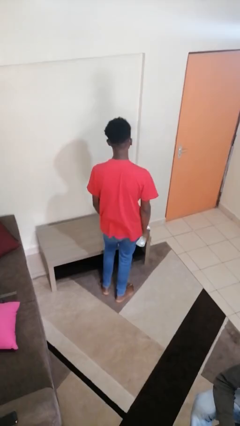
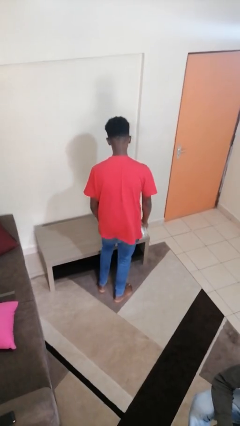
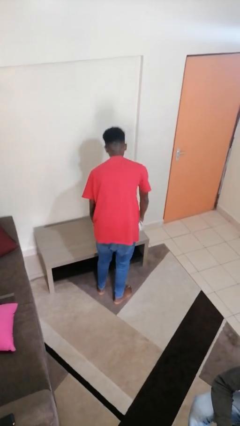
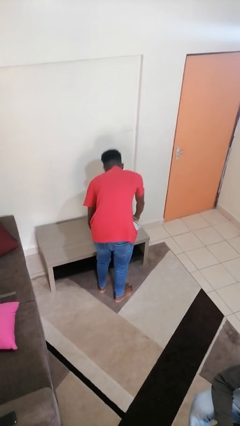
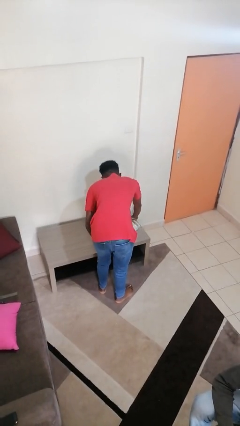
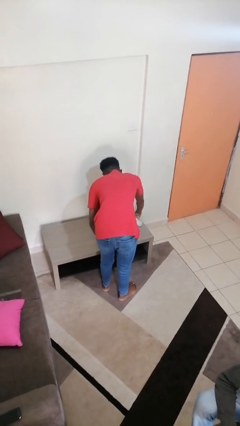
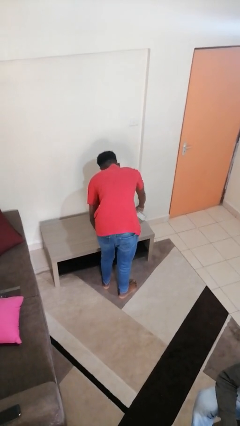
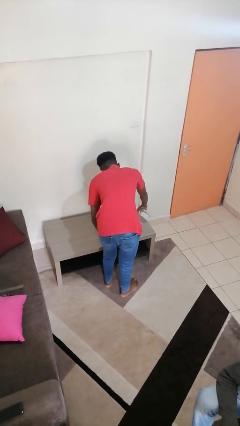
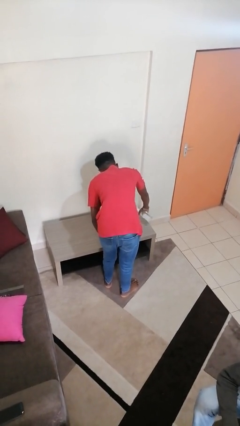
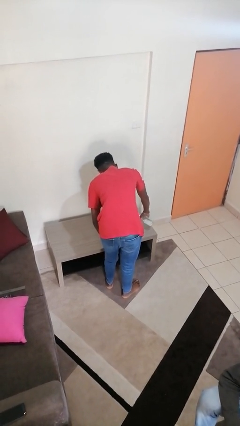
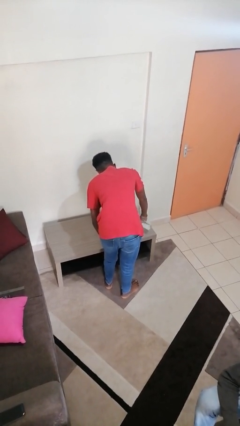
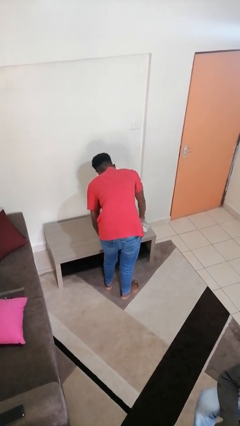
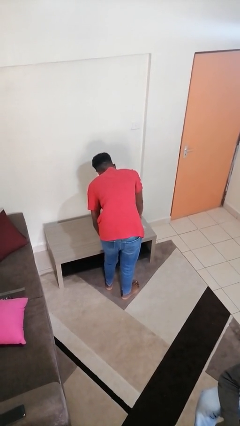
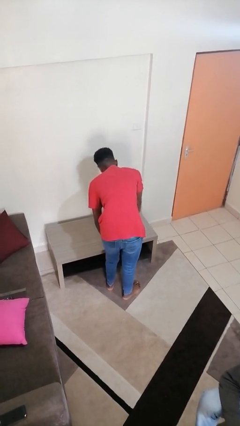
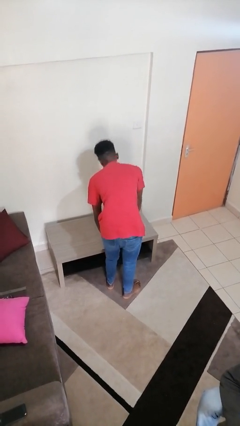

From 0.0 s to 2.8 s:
person sprays from bottle

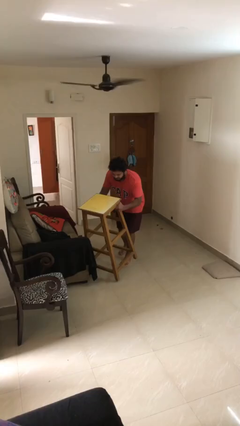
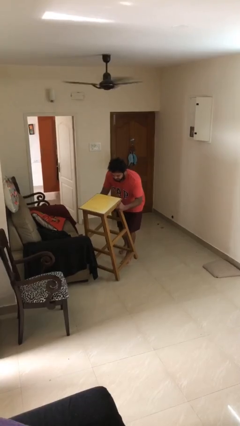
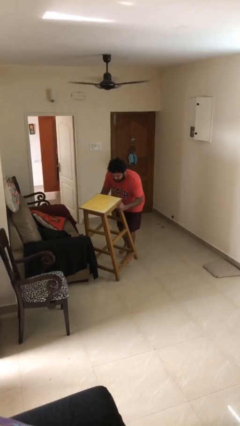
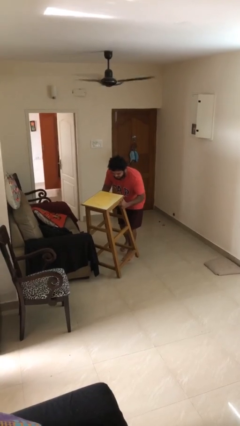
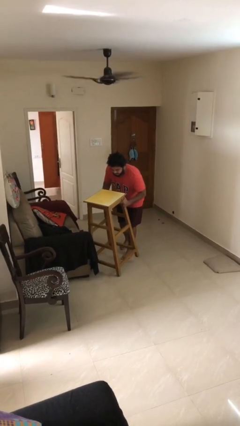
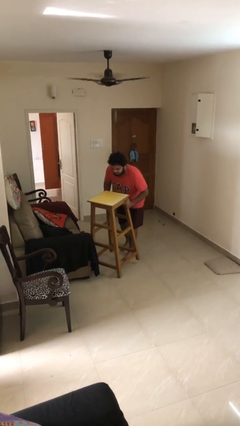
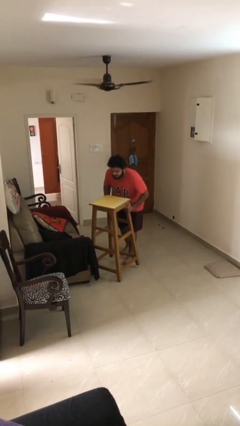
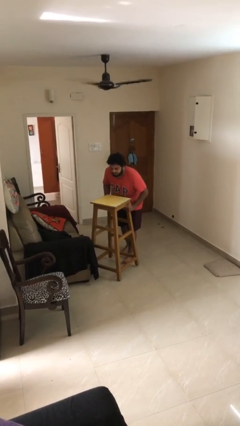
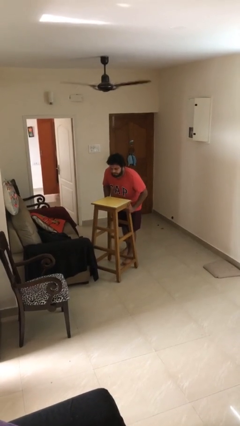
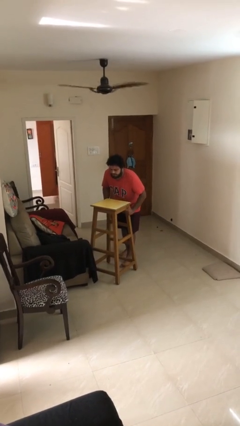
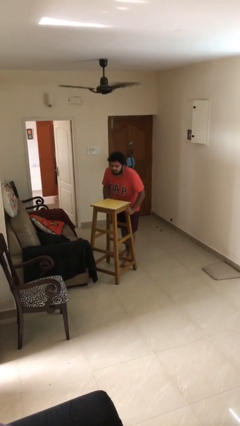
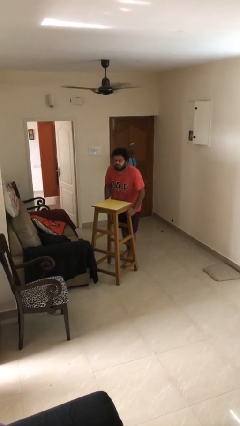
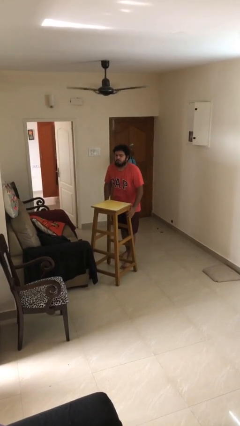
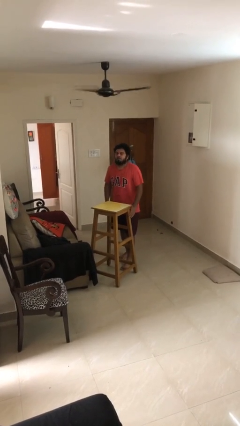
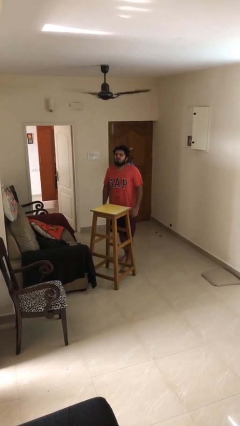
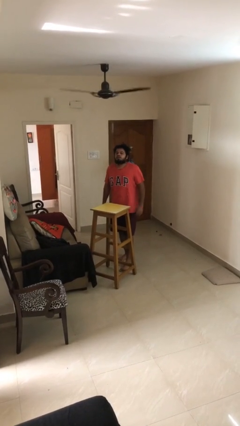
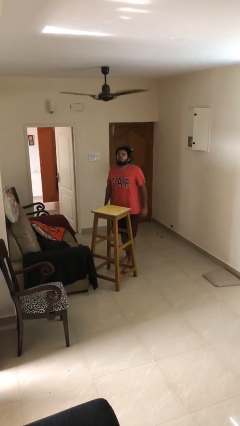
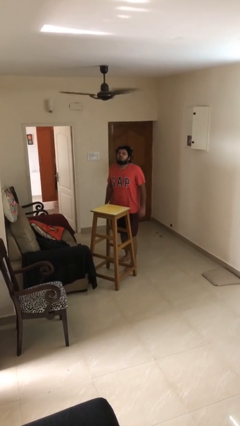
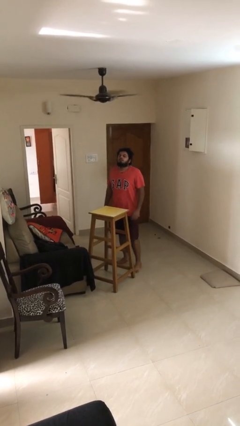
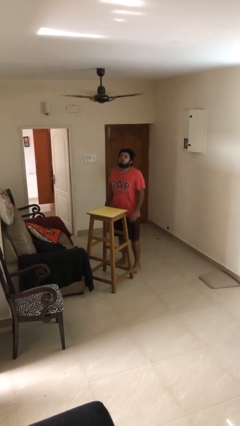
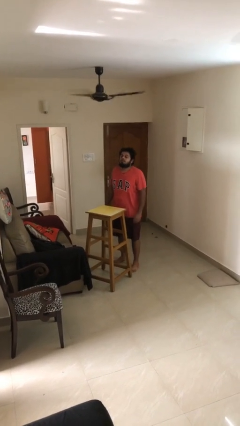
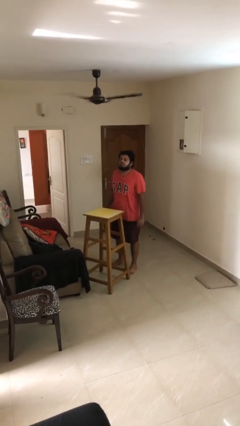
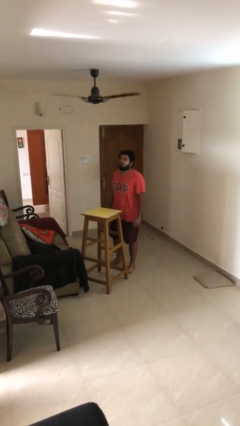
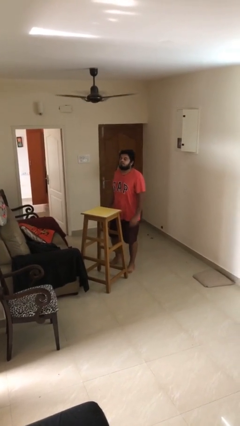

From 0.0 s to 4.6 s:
person puts down object on floor

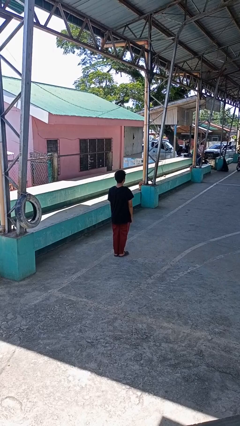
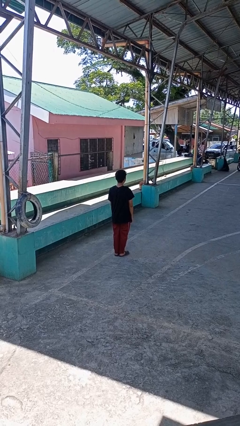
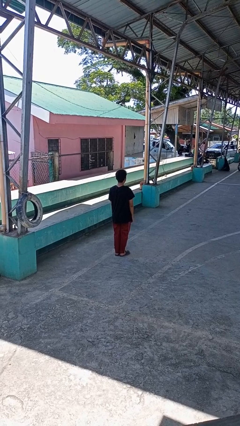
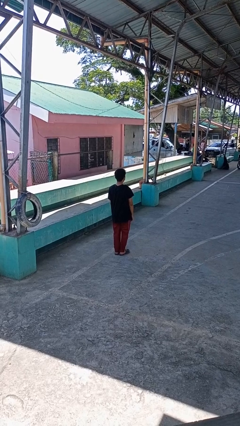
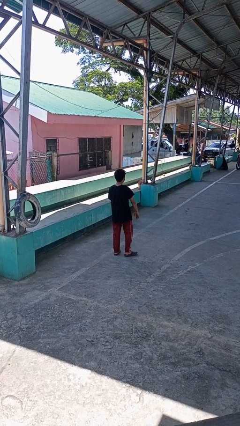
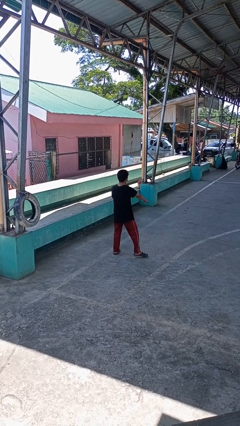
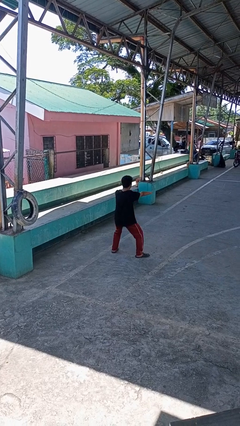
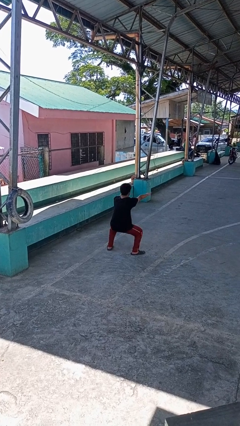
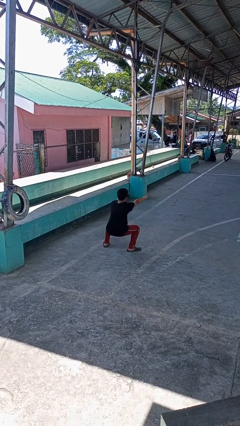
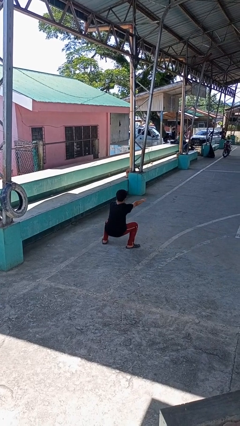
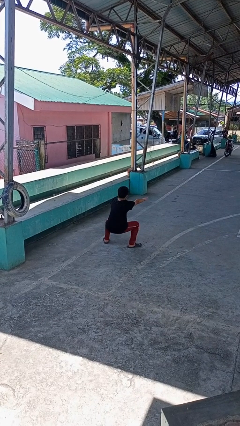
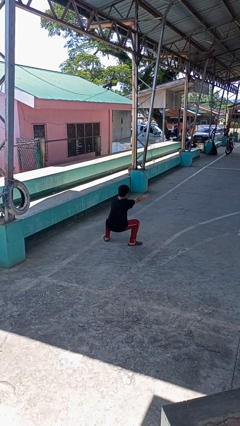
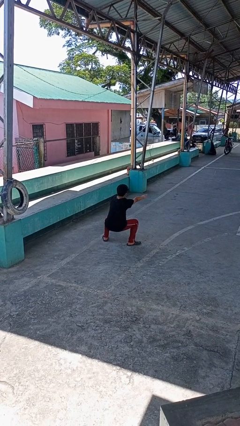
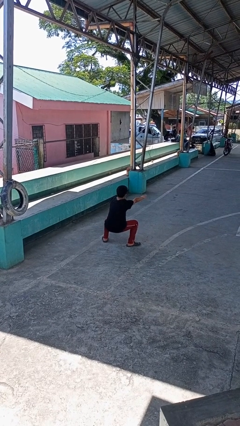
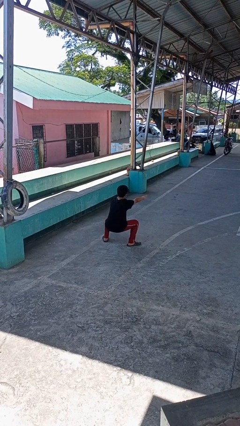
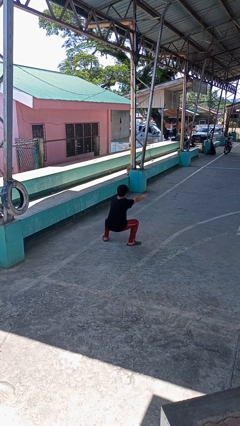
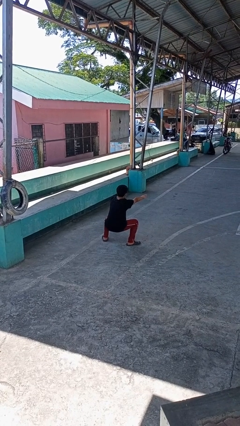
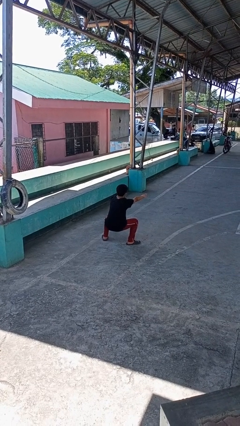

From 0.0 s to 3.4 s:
person squats

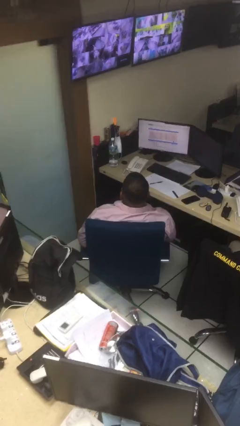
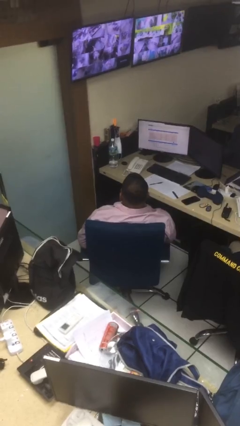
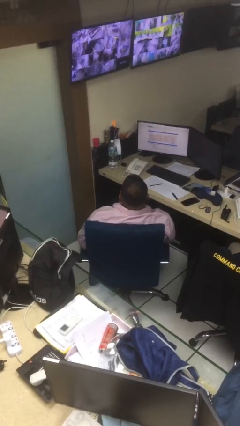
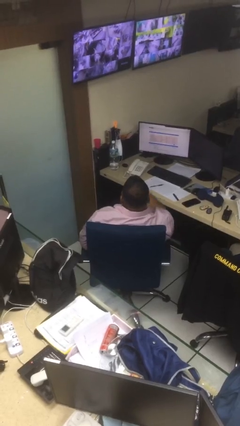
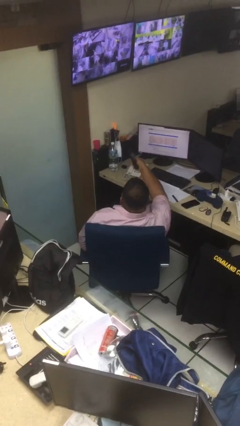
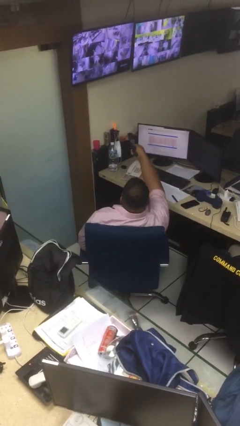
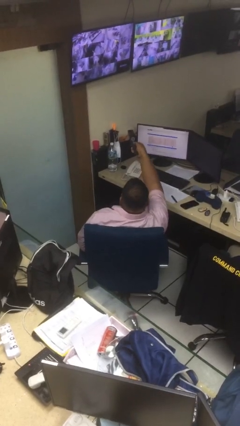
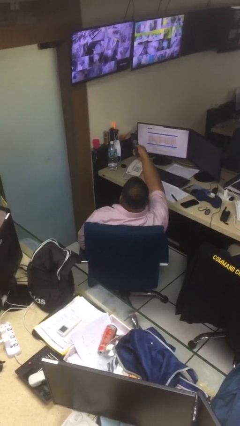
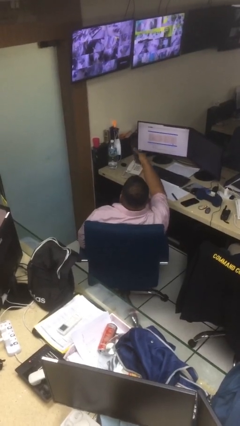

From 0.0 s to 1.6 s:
person uses television remote

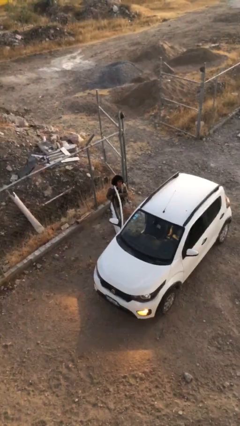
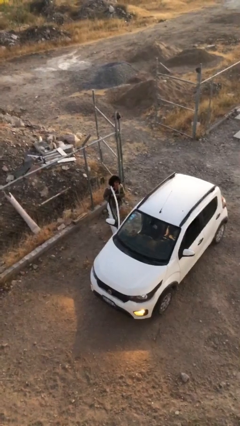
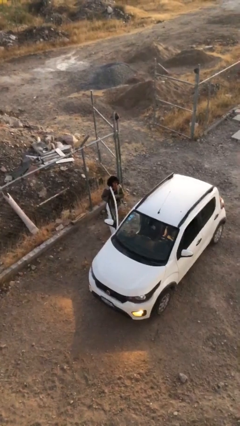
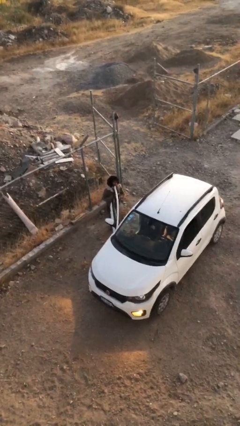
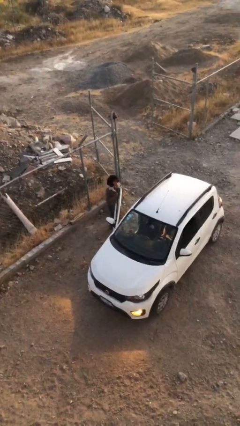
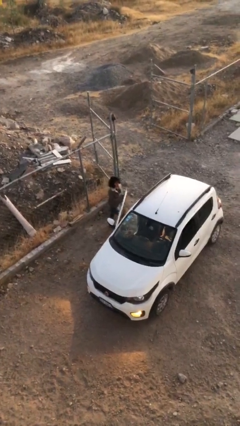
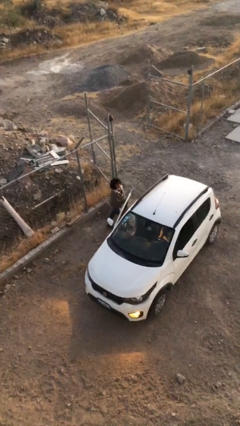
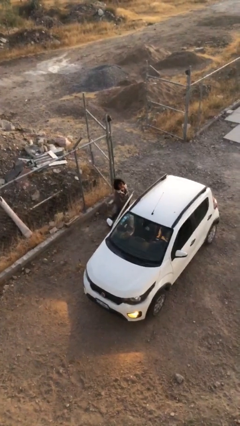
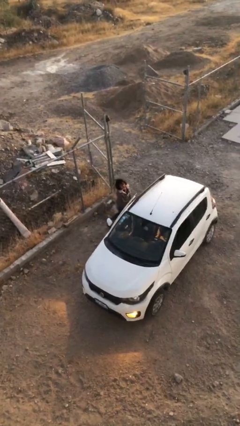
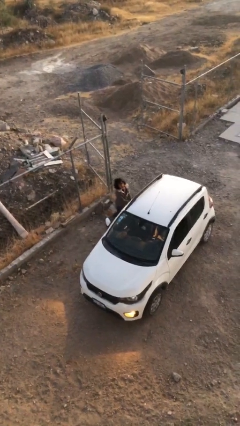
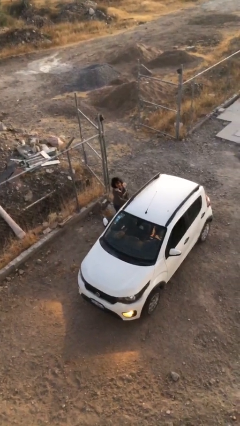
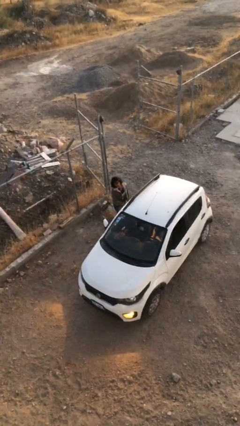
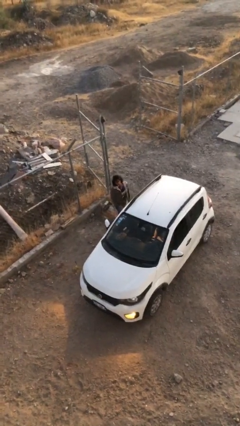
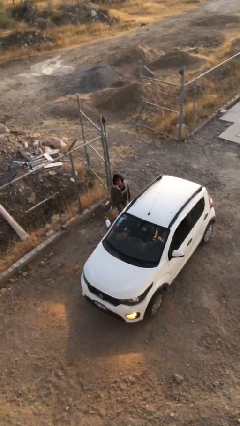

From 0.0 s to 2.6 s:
person closes car door

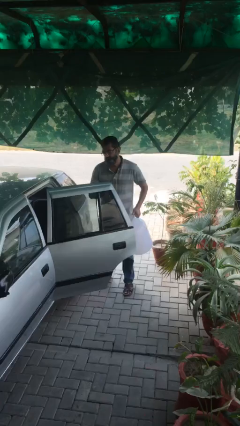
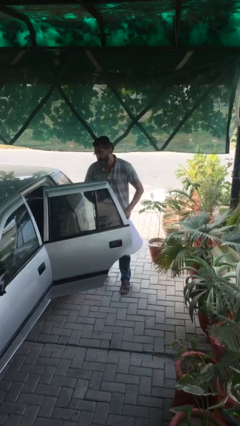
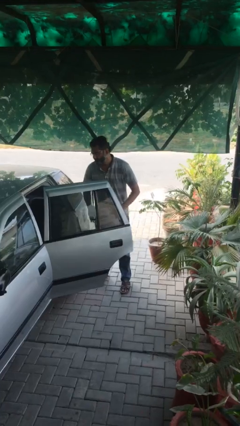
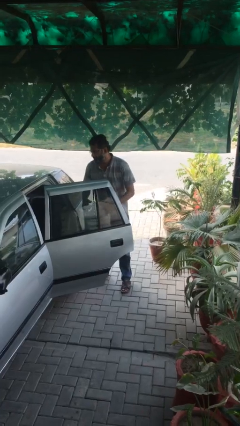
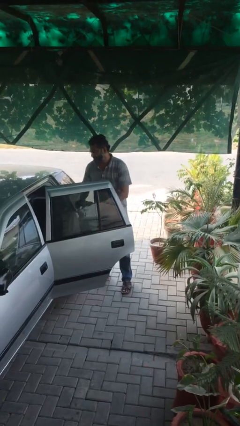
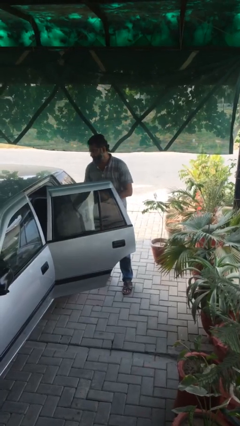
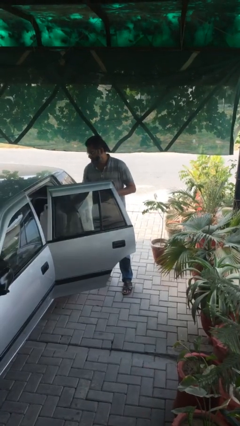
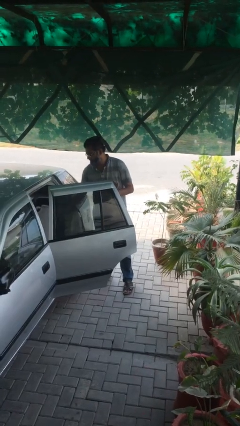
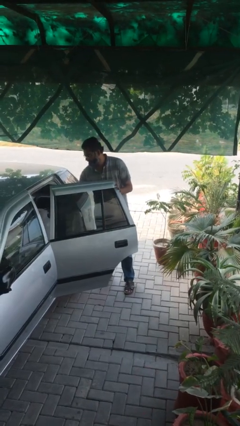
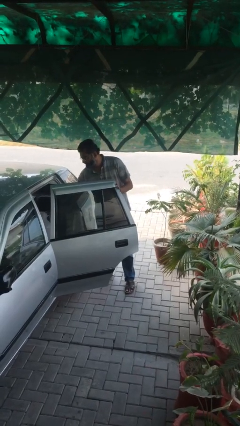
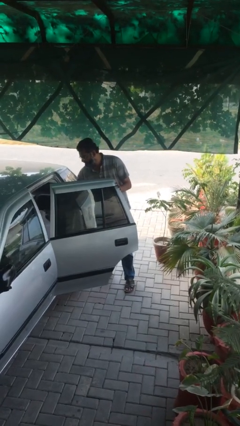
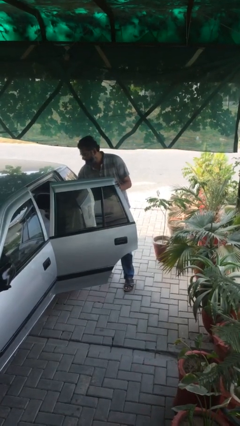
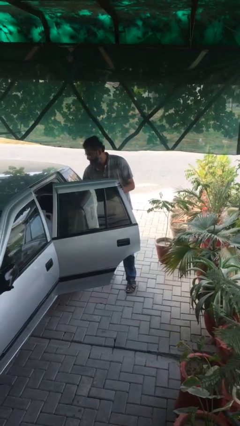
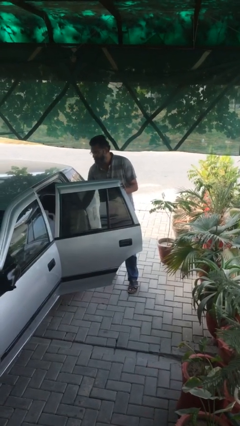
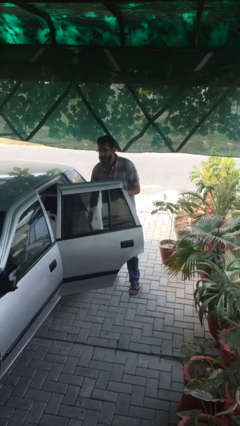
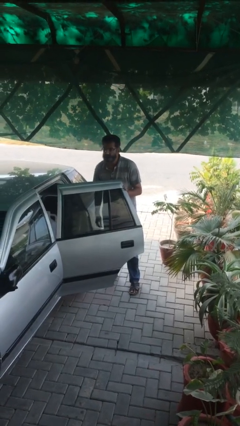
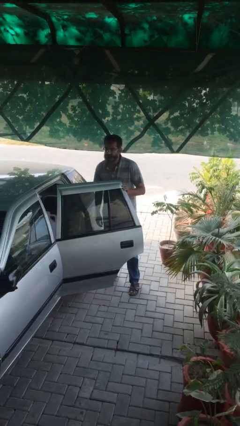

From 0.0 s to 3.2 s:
person loads car
